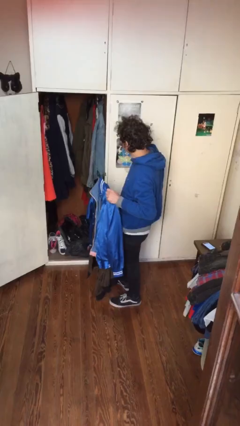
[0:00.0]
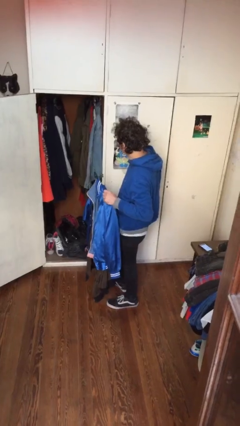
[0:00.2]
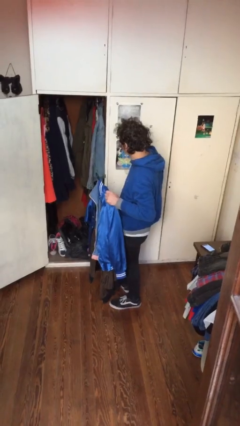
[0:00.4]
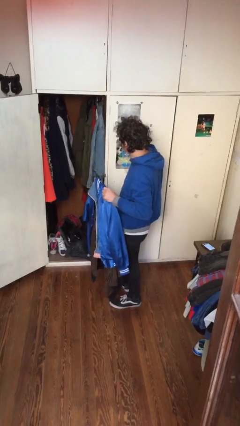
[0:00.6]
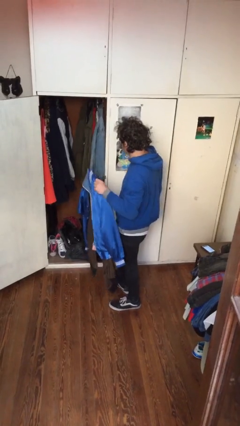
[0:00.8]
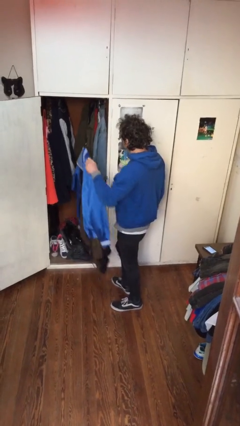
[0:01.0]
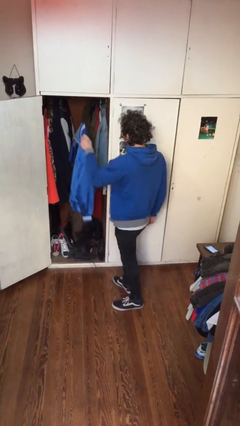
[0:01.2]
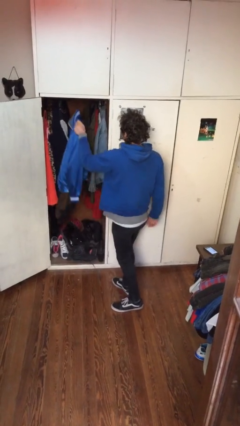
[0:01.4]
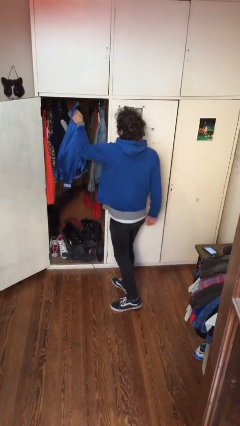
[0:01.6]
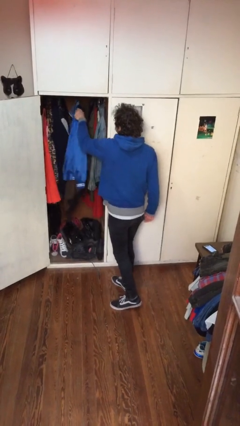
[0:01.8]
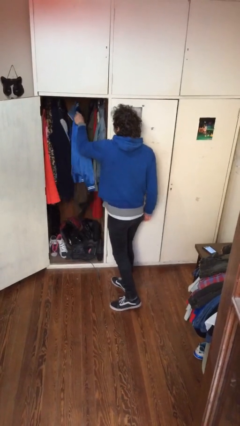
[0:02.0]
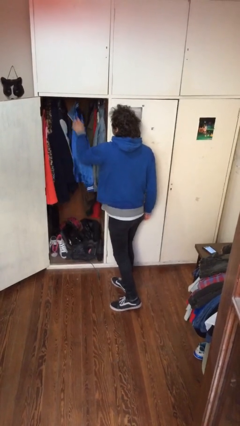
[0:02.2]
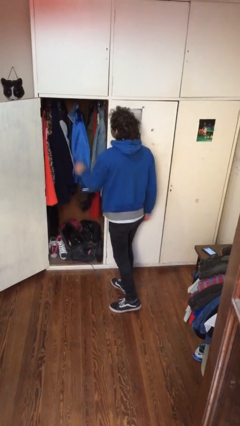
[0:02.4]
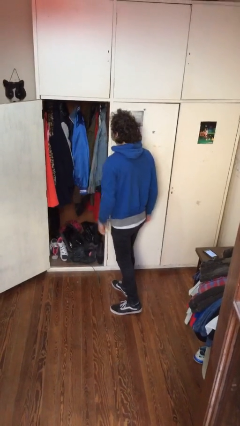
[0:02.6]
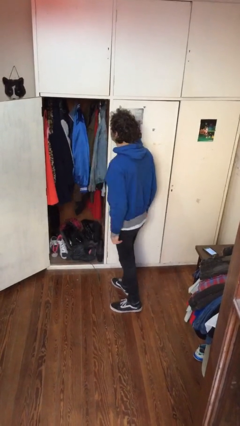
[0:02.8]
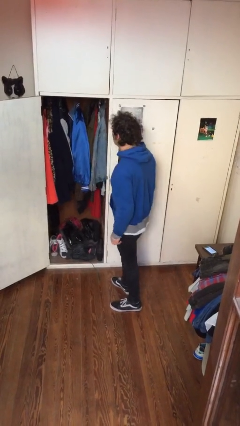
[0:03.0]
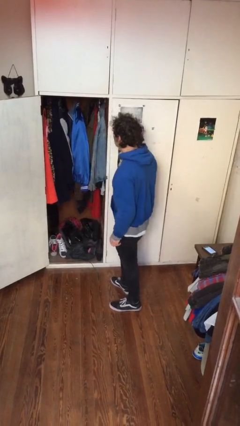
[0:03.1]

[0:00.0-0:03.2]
person puts clothes into closet

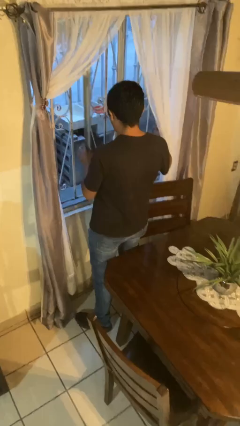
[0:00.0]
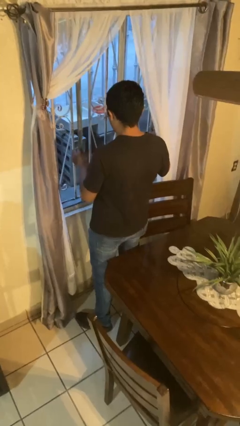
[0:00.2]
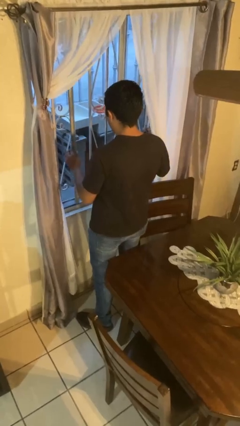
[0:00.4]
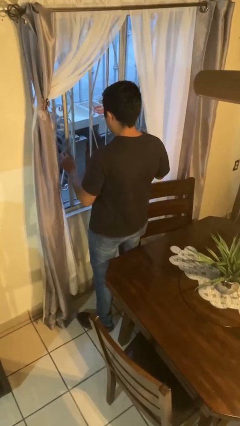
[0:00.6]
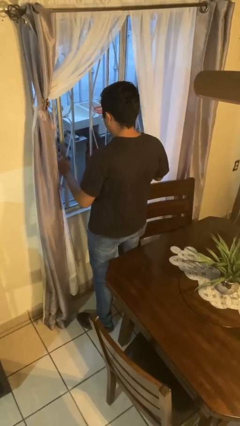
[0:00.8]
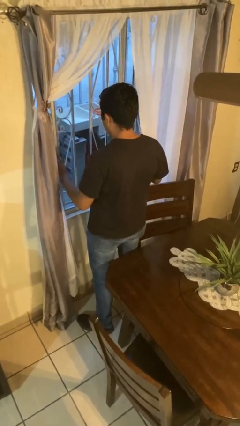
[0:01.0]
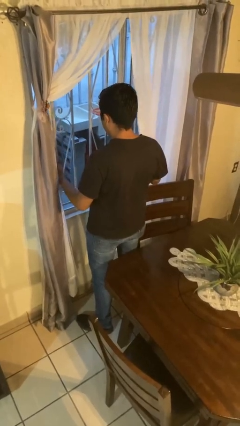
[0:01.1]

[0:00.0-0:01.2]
person closes home window

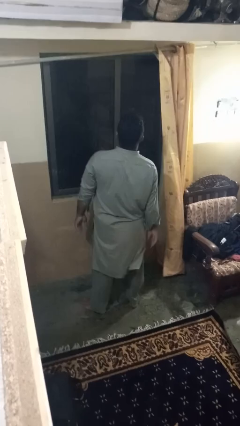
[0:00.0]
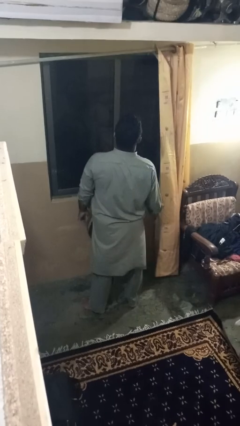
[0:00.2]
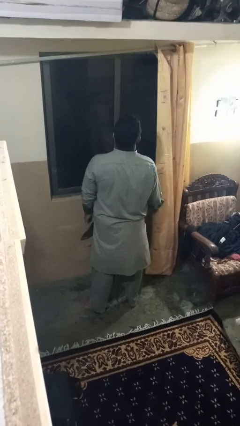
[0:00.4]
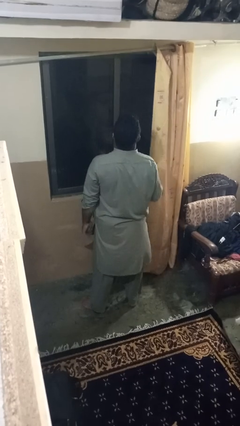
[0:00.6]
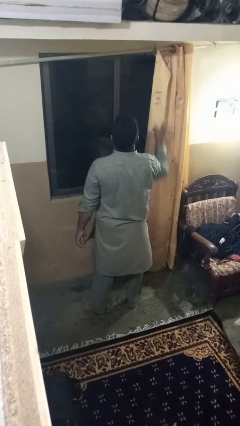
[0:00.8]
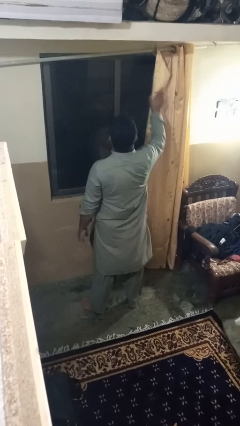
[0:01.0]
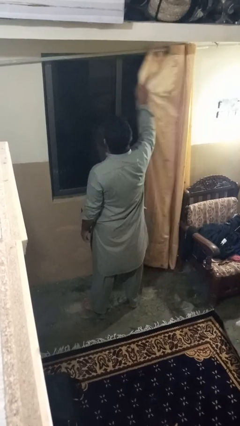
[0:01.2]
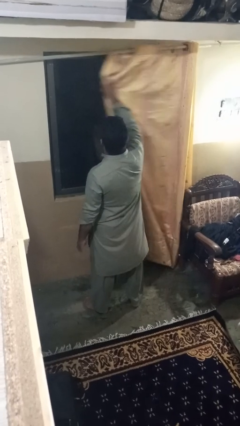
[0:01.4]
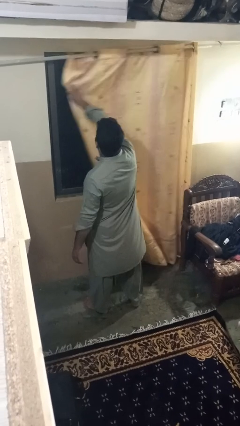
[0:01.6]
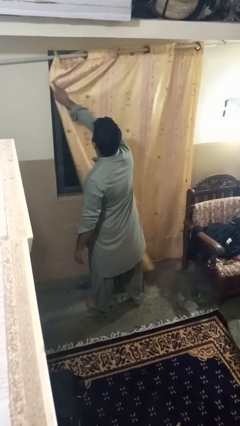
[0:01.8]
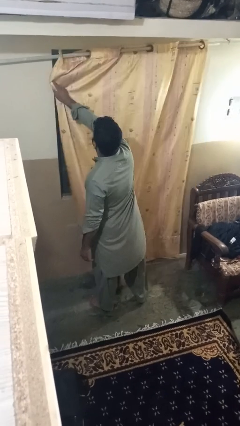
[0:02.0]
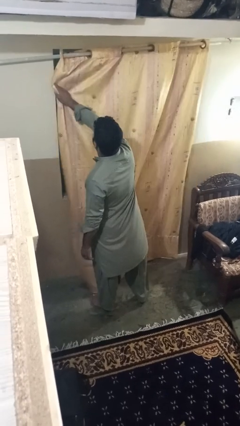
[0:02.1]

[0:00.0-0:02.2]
person closes curtains

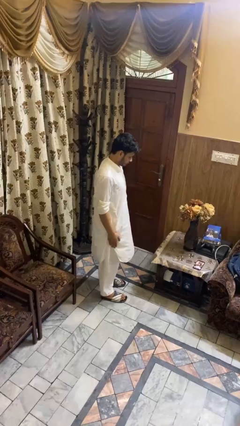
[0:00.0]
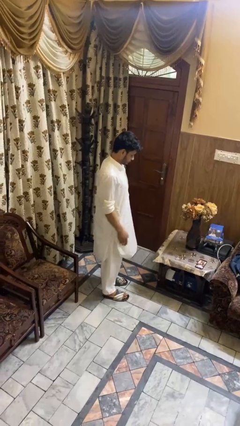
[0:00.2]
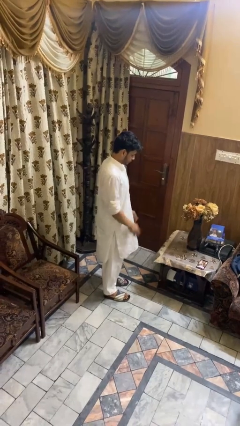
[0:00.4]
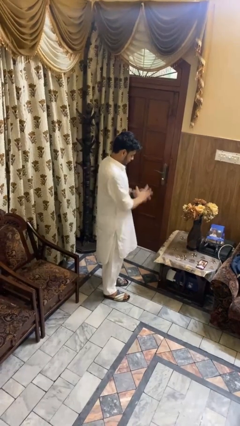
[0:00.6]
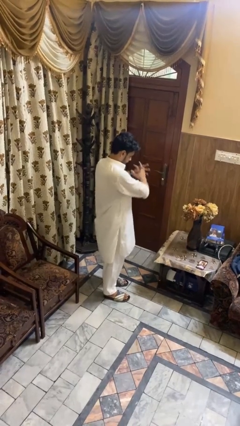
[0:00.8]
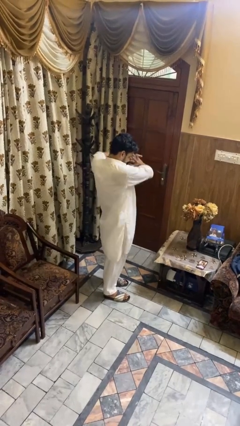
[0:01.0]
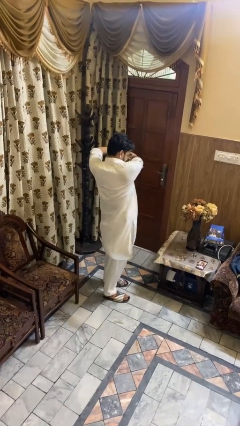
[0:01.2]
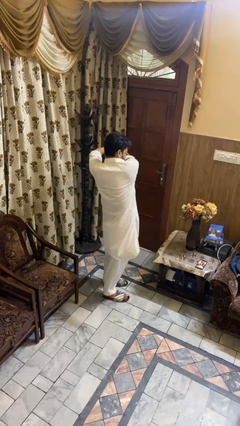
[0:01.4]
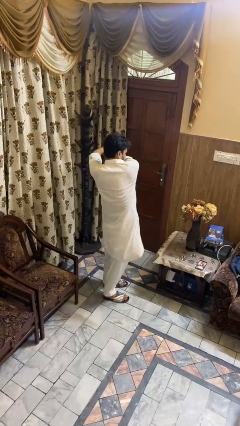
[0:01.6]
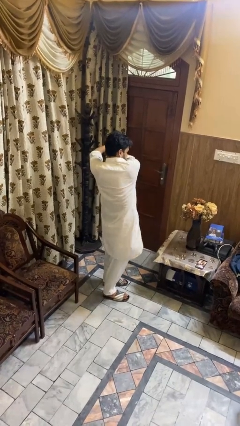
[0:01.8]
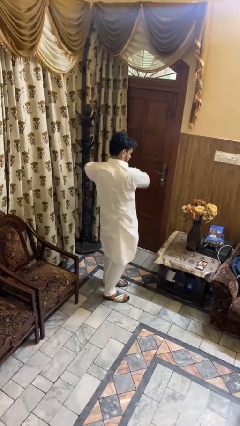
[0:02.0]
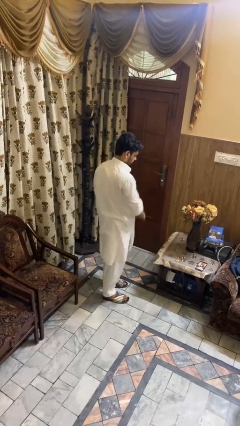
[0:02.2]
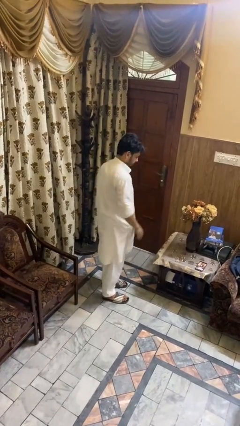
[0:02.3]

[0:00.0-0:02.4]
person stretches arms to side

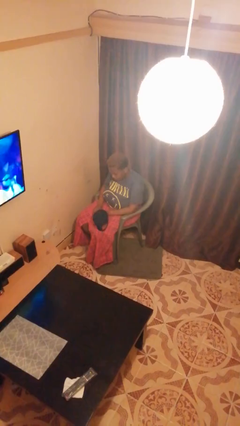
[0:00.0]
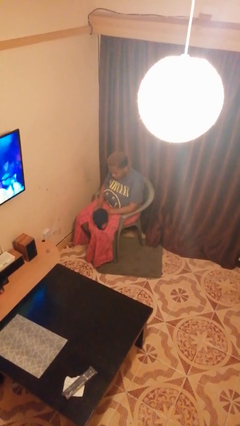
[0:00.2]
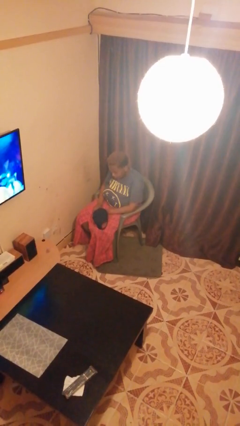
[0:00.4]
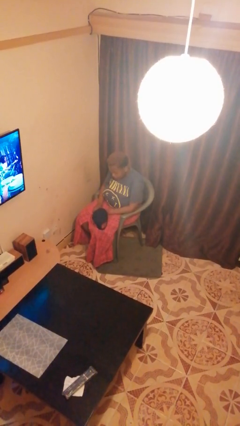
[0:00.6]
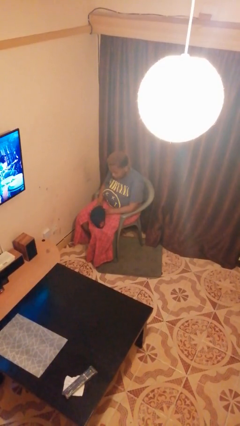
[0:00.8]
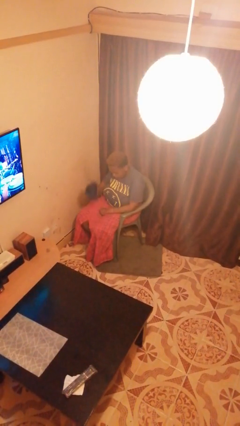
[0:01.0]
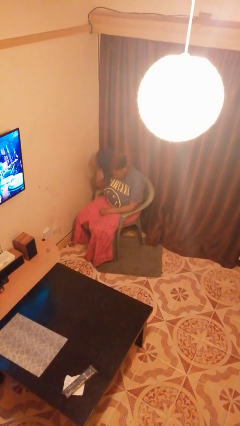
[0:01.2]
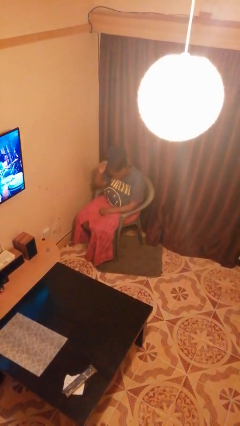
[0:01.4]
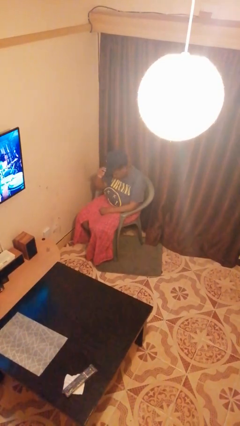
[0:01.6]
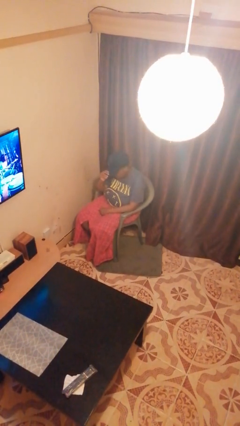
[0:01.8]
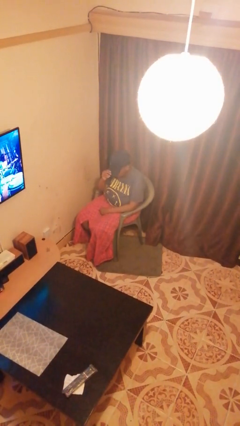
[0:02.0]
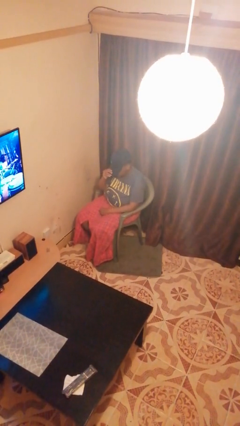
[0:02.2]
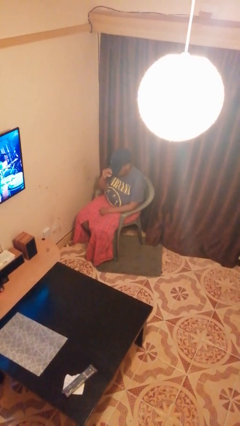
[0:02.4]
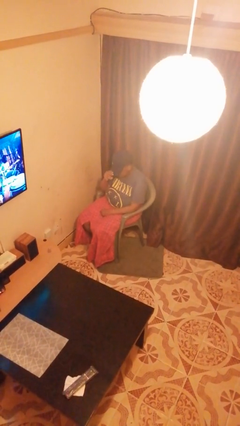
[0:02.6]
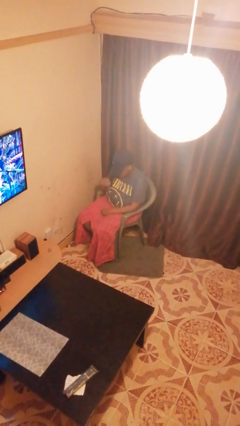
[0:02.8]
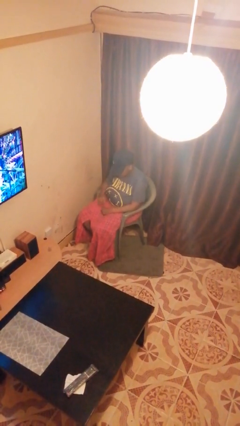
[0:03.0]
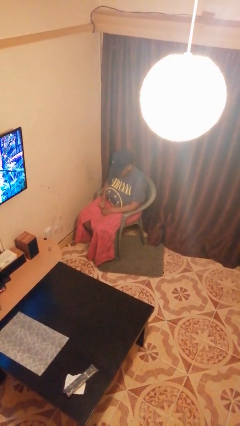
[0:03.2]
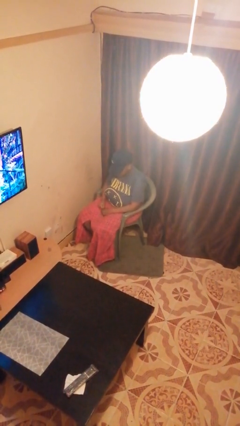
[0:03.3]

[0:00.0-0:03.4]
person puts on hat

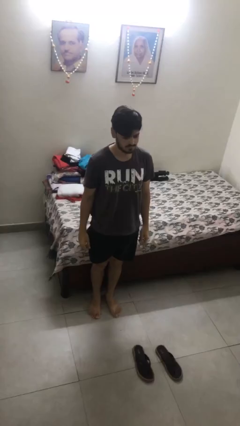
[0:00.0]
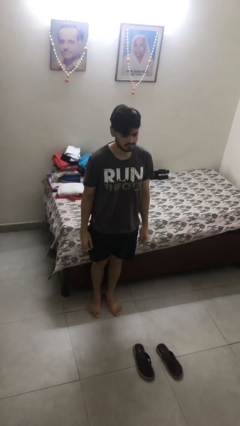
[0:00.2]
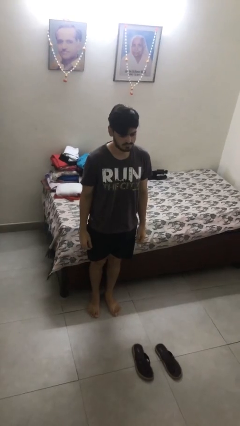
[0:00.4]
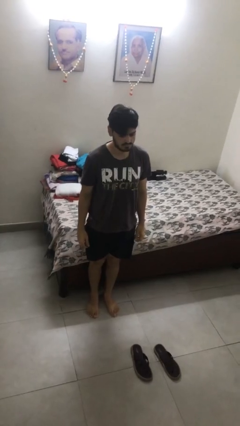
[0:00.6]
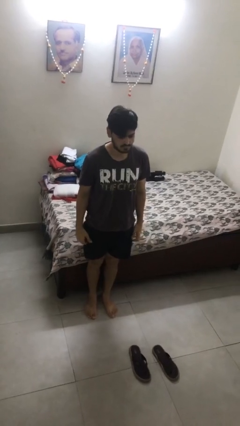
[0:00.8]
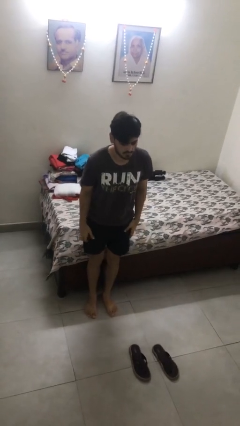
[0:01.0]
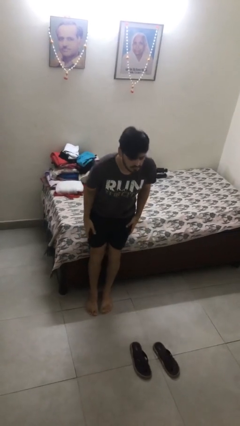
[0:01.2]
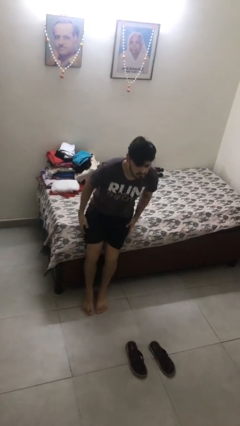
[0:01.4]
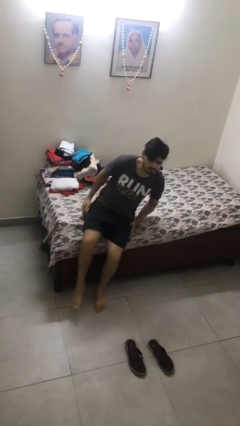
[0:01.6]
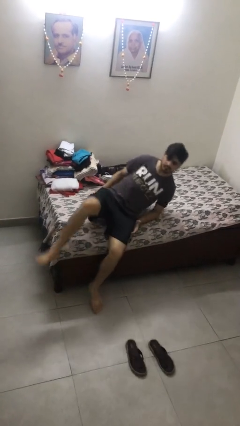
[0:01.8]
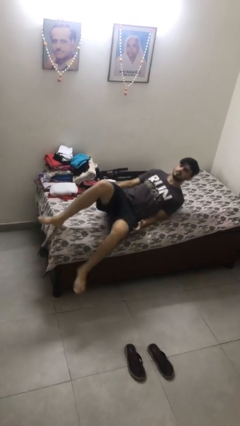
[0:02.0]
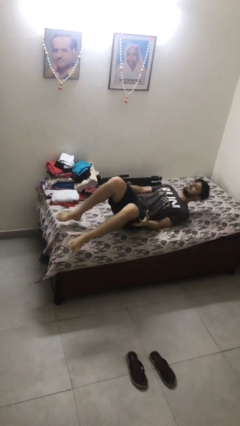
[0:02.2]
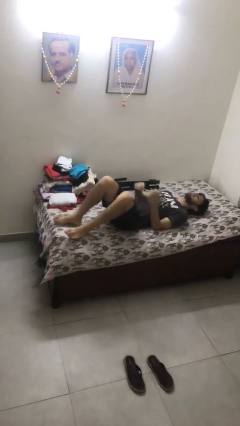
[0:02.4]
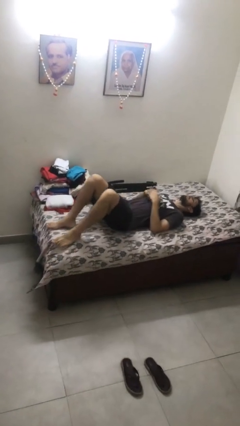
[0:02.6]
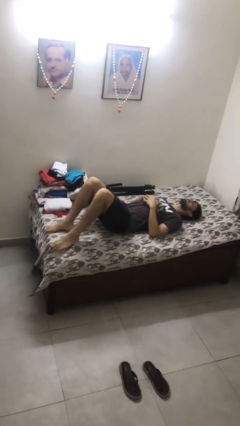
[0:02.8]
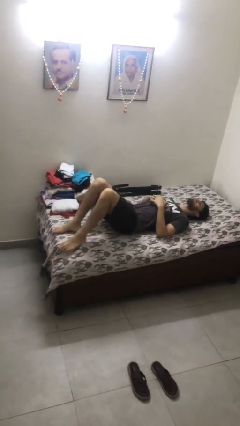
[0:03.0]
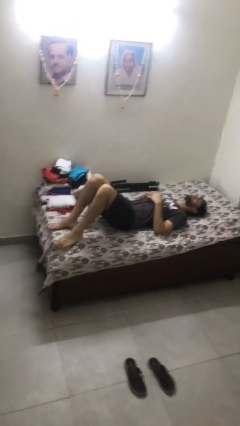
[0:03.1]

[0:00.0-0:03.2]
person lies down on bed

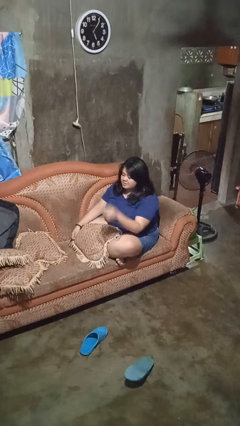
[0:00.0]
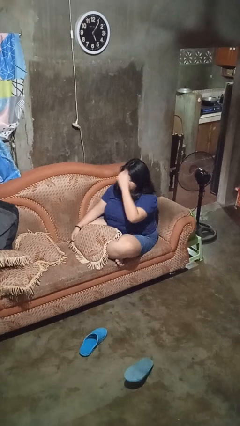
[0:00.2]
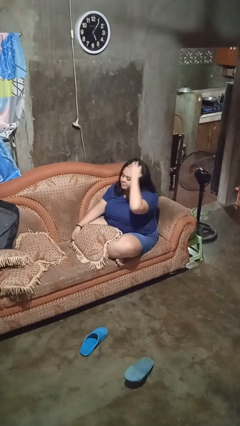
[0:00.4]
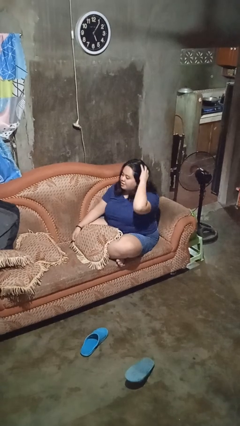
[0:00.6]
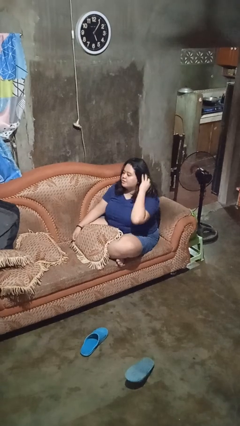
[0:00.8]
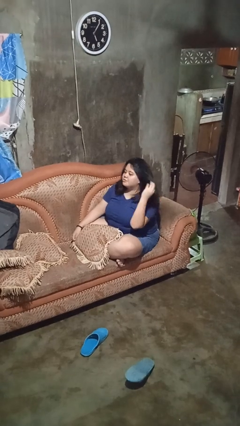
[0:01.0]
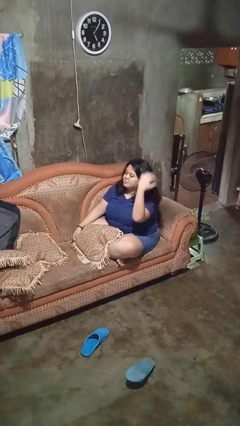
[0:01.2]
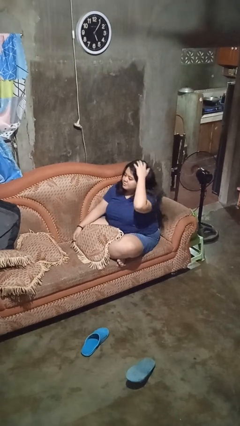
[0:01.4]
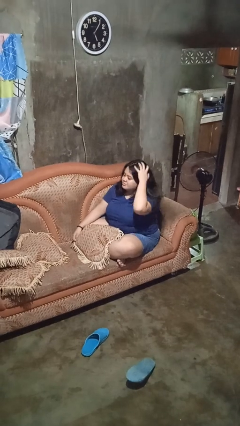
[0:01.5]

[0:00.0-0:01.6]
person strokes hair
